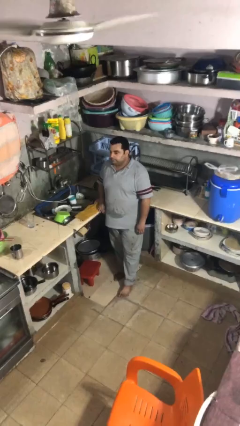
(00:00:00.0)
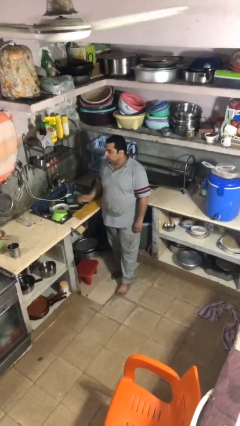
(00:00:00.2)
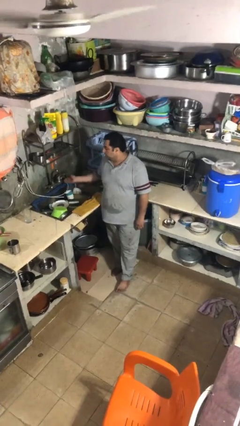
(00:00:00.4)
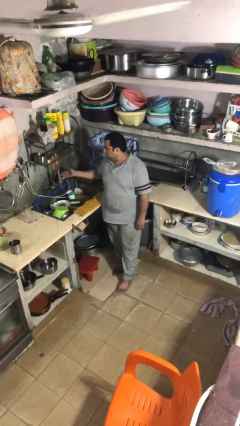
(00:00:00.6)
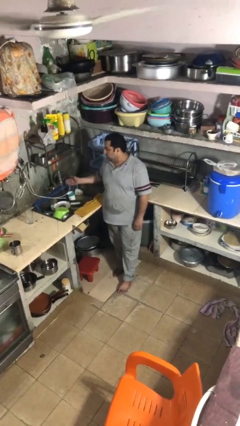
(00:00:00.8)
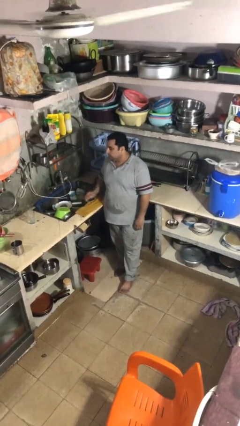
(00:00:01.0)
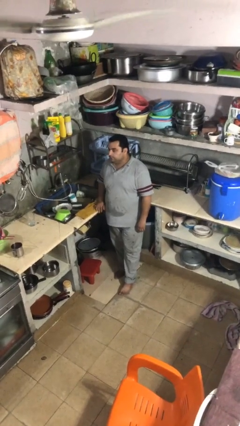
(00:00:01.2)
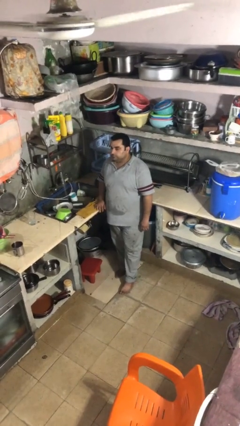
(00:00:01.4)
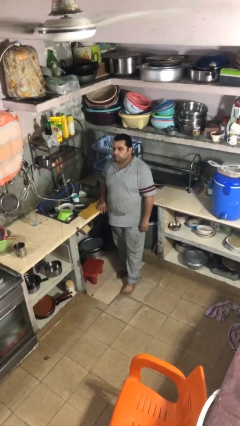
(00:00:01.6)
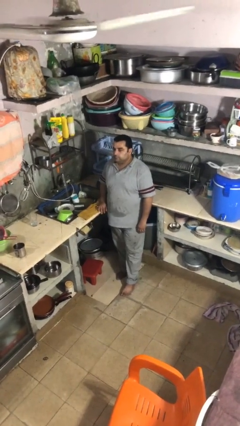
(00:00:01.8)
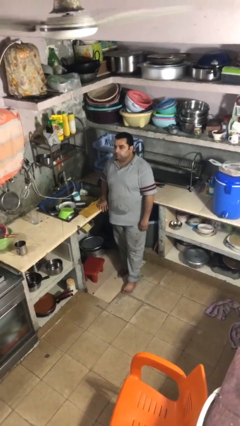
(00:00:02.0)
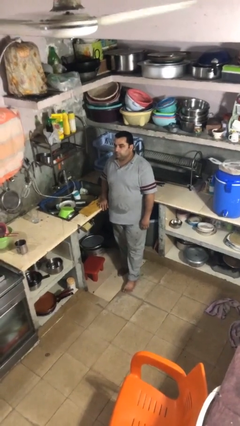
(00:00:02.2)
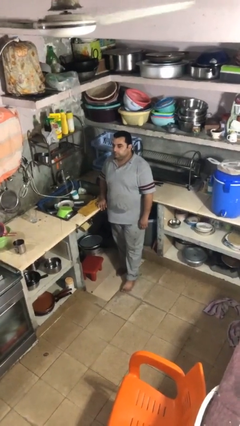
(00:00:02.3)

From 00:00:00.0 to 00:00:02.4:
person turns on faucet

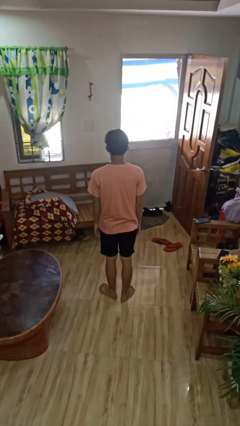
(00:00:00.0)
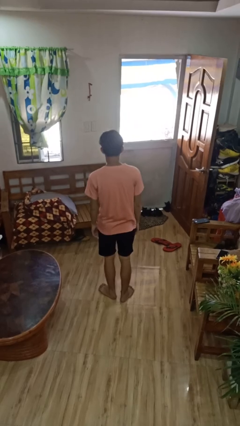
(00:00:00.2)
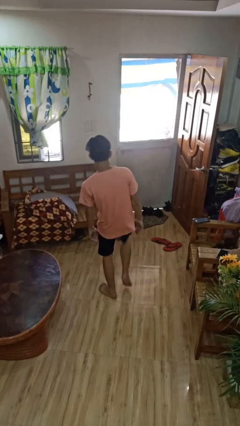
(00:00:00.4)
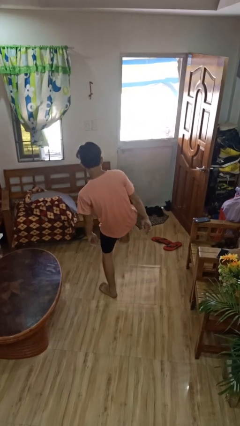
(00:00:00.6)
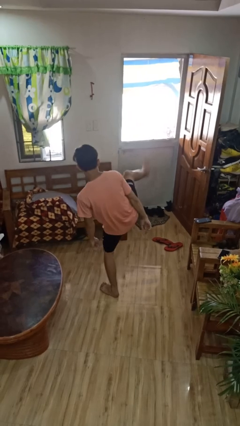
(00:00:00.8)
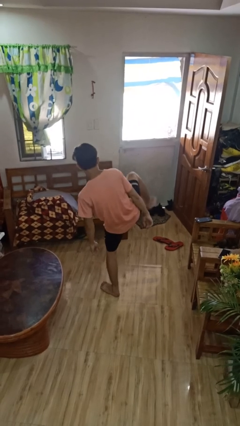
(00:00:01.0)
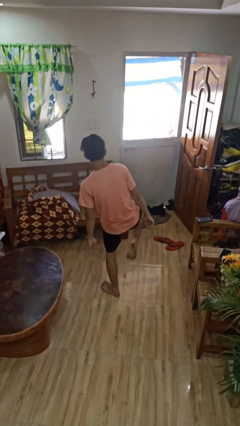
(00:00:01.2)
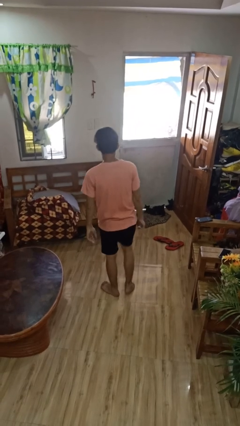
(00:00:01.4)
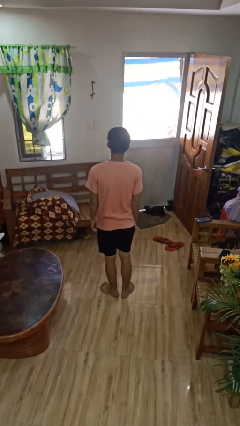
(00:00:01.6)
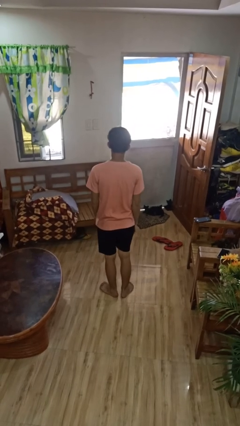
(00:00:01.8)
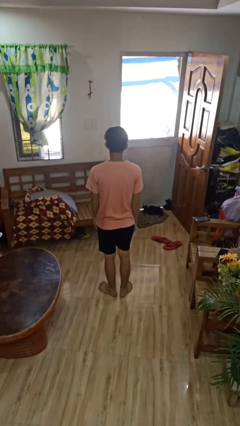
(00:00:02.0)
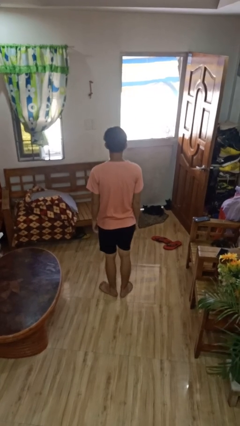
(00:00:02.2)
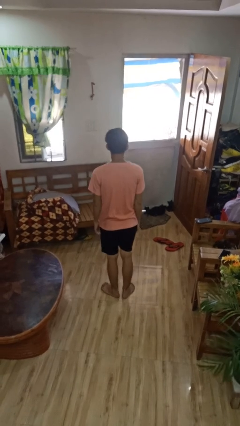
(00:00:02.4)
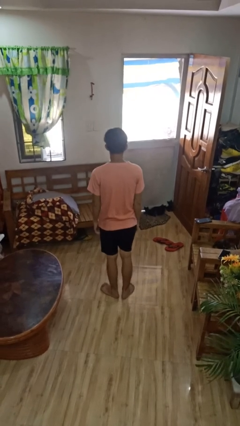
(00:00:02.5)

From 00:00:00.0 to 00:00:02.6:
person karate kicks

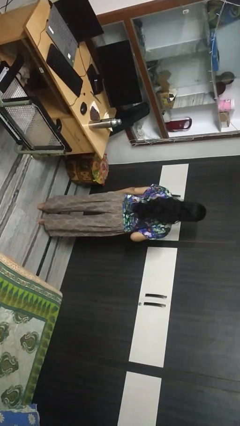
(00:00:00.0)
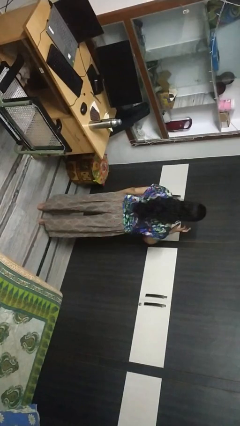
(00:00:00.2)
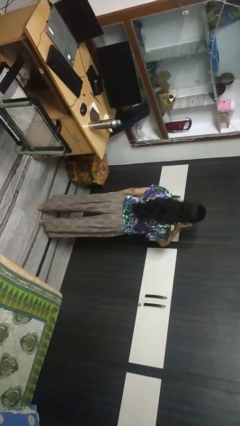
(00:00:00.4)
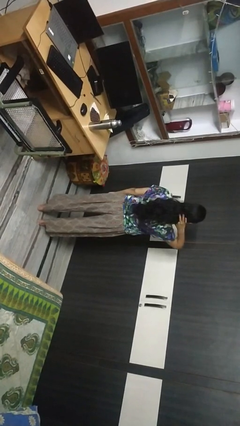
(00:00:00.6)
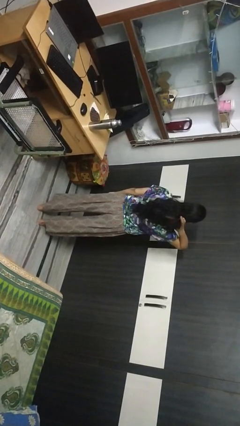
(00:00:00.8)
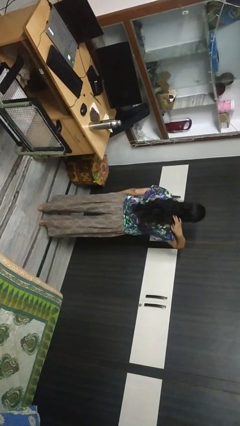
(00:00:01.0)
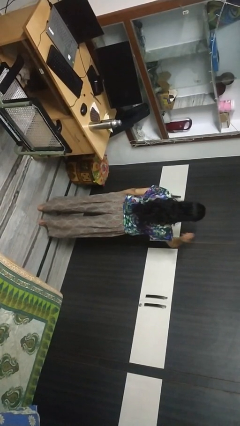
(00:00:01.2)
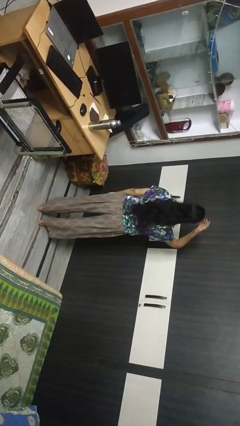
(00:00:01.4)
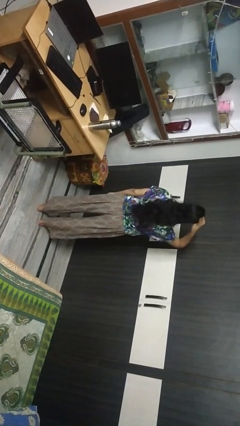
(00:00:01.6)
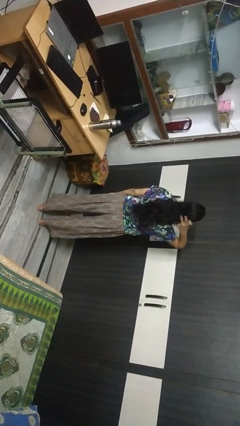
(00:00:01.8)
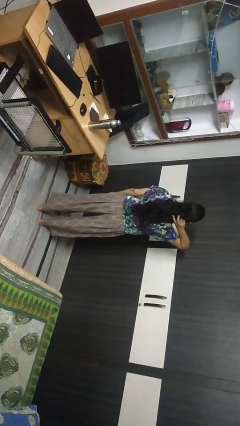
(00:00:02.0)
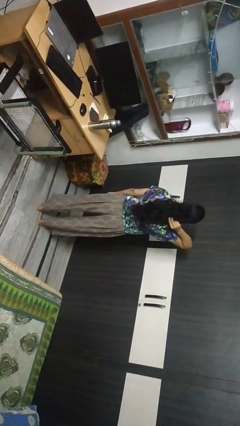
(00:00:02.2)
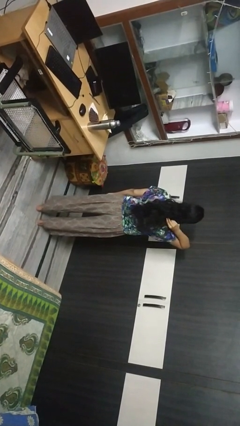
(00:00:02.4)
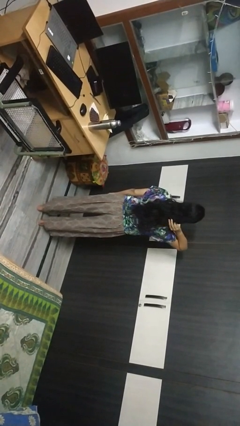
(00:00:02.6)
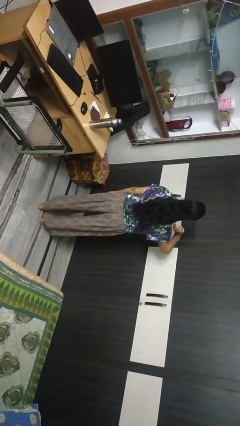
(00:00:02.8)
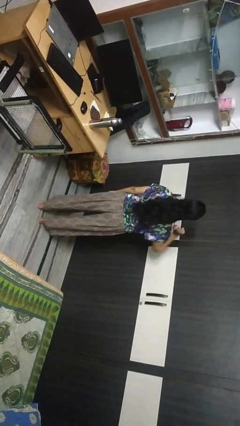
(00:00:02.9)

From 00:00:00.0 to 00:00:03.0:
person strokes hair

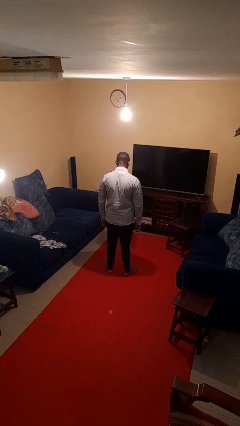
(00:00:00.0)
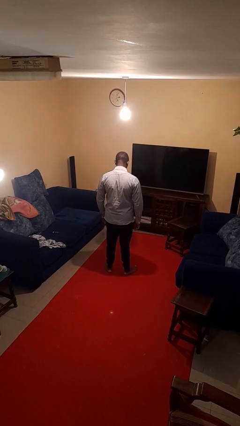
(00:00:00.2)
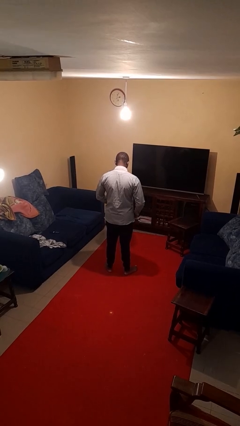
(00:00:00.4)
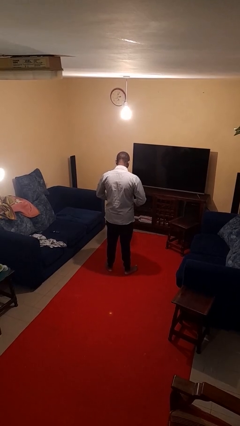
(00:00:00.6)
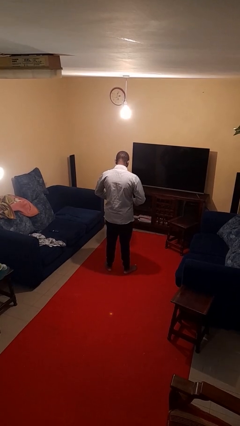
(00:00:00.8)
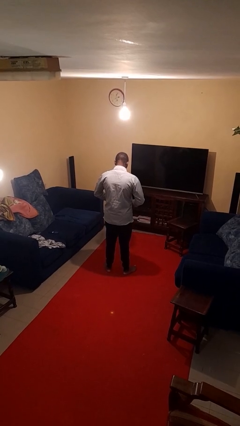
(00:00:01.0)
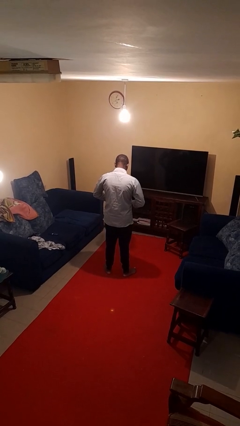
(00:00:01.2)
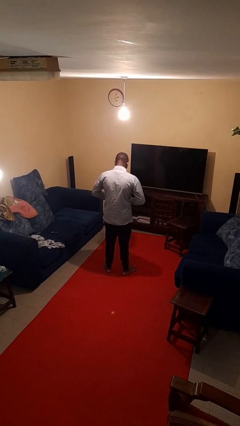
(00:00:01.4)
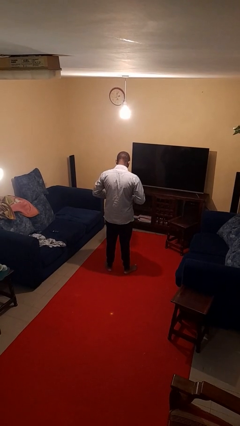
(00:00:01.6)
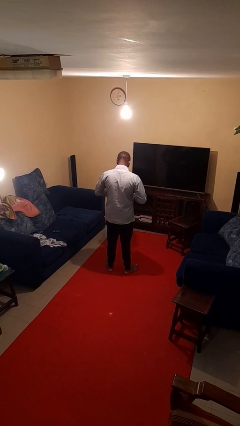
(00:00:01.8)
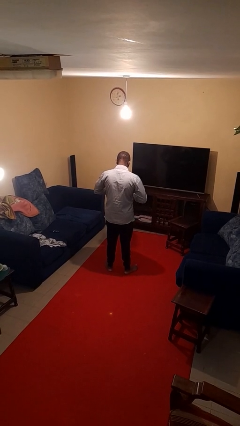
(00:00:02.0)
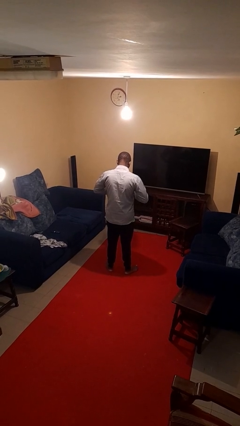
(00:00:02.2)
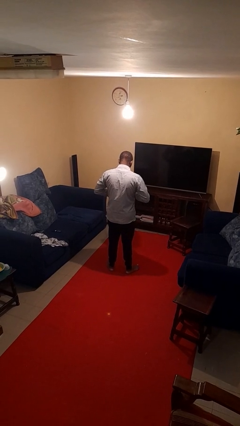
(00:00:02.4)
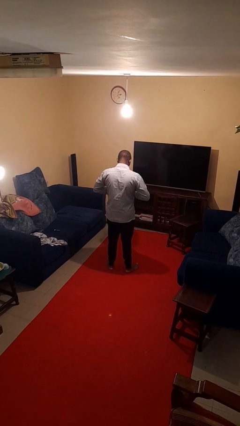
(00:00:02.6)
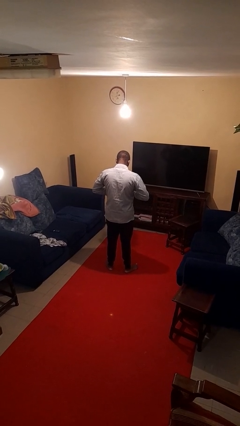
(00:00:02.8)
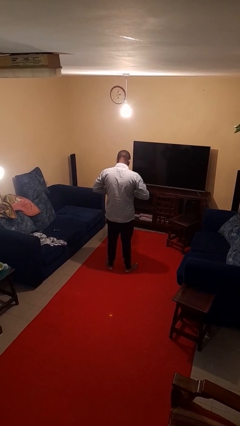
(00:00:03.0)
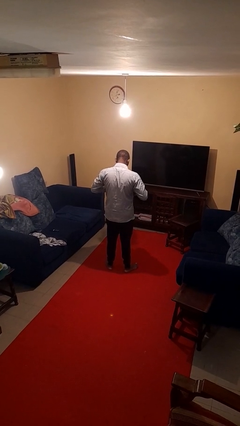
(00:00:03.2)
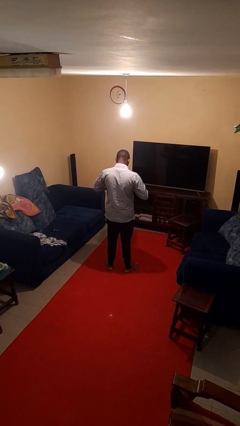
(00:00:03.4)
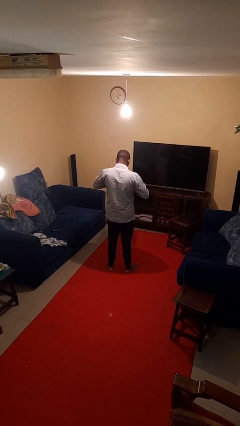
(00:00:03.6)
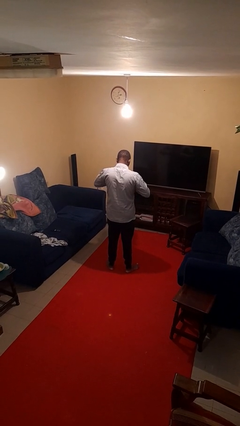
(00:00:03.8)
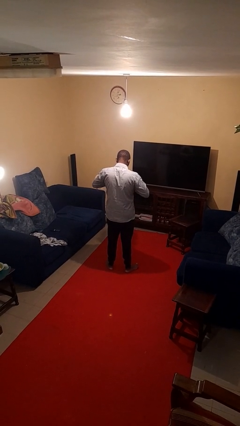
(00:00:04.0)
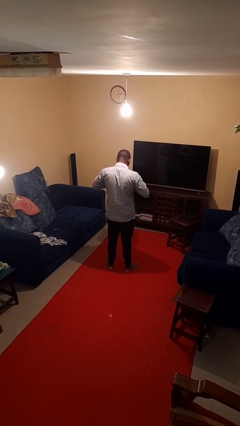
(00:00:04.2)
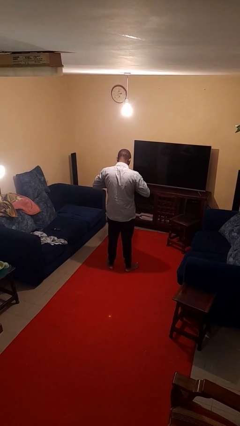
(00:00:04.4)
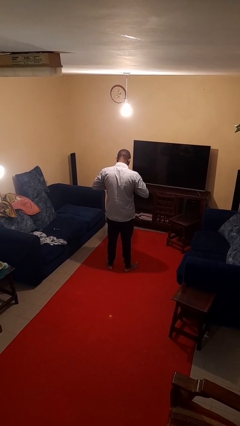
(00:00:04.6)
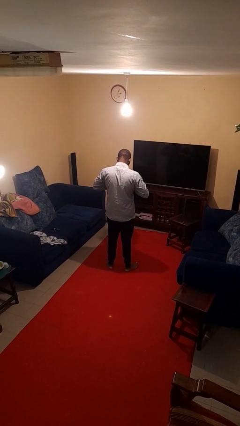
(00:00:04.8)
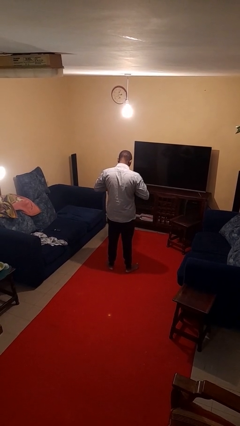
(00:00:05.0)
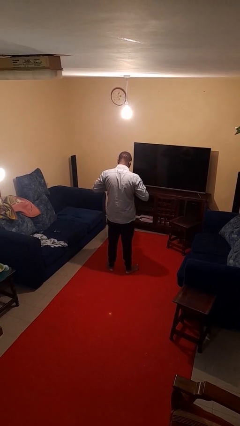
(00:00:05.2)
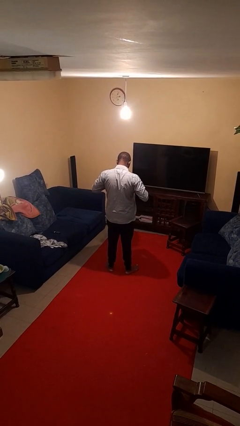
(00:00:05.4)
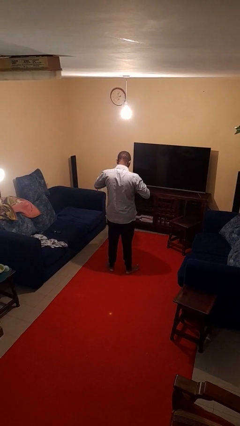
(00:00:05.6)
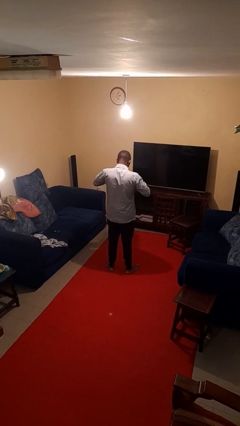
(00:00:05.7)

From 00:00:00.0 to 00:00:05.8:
person unbuttons shirt

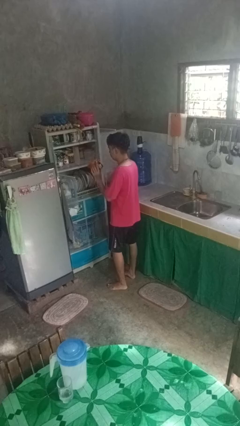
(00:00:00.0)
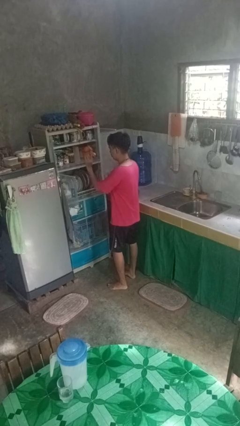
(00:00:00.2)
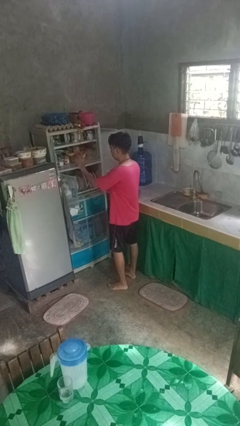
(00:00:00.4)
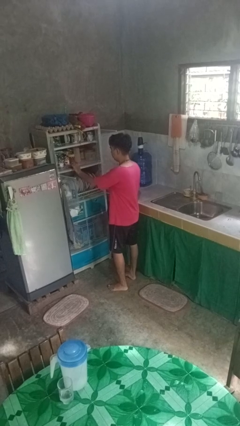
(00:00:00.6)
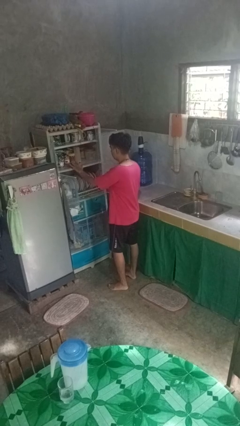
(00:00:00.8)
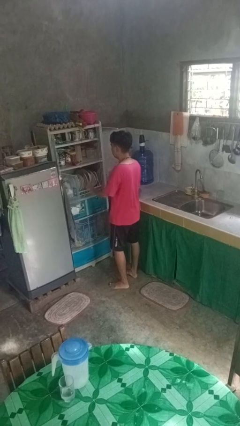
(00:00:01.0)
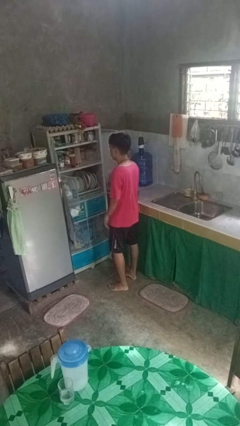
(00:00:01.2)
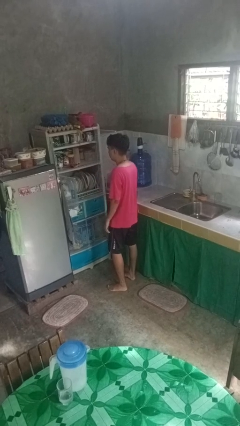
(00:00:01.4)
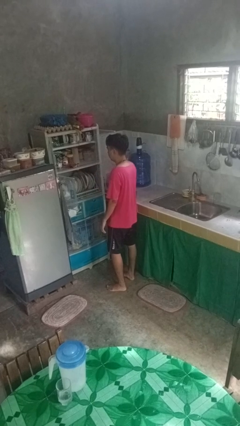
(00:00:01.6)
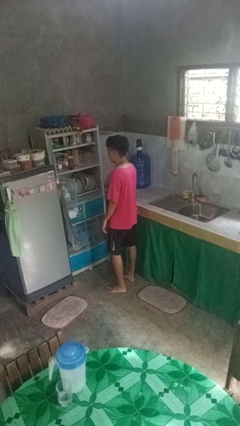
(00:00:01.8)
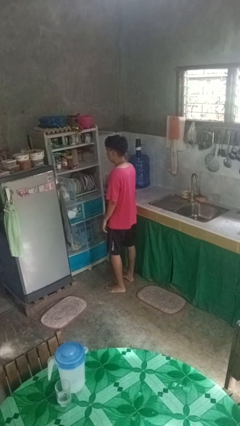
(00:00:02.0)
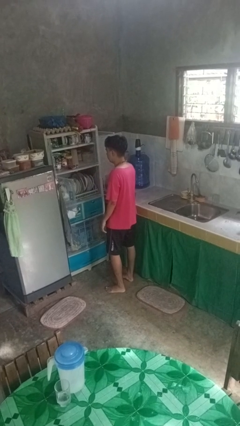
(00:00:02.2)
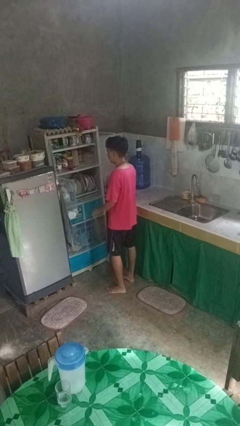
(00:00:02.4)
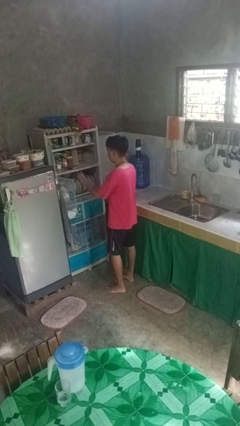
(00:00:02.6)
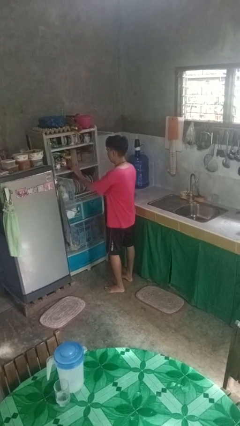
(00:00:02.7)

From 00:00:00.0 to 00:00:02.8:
person puts object in cabinet

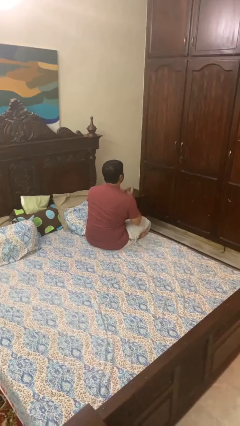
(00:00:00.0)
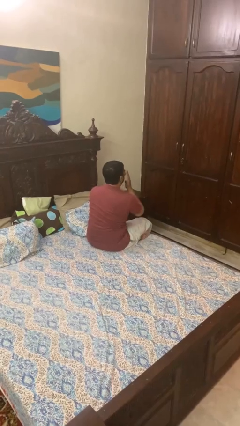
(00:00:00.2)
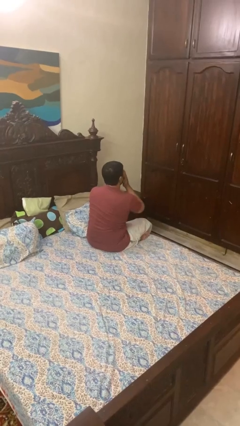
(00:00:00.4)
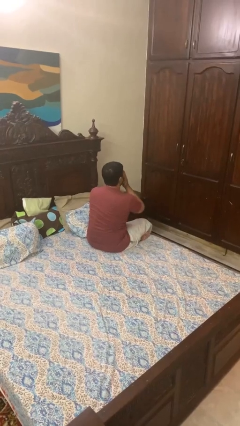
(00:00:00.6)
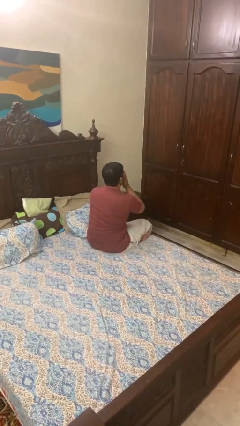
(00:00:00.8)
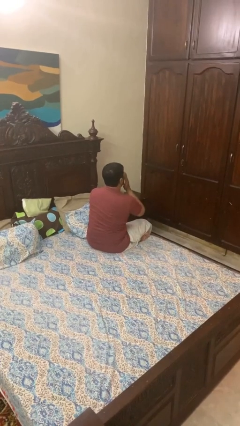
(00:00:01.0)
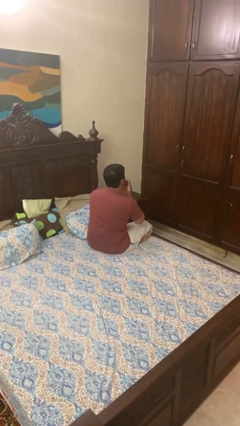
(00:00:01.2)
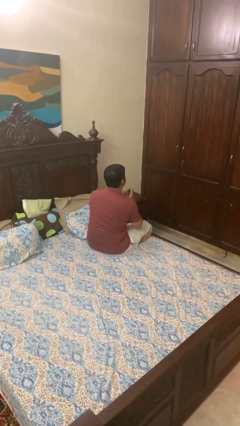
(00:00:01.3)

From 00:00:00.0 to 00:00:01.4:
person covers face with hands
